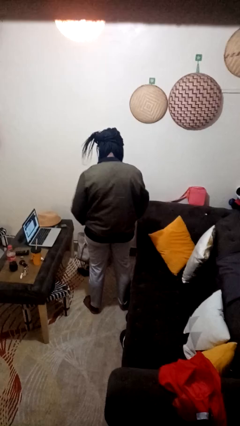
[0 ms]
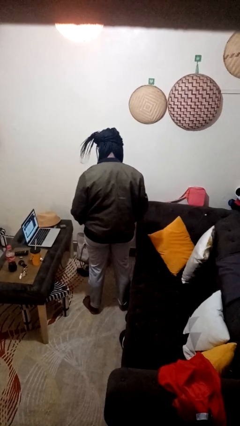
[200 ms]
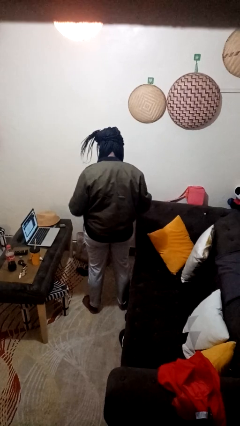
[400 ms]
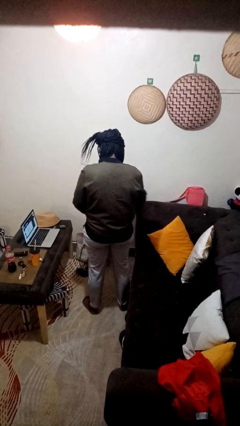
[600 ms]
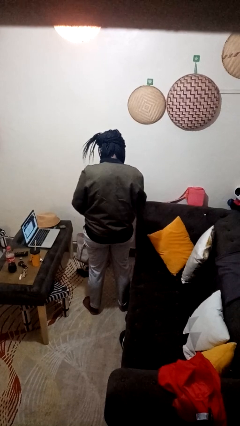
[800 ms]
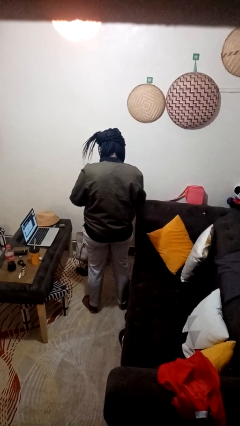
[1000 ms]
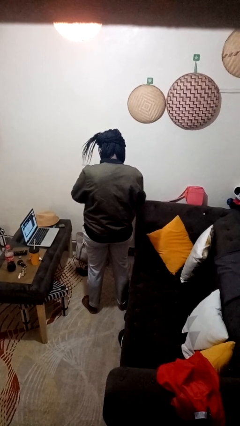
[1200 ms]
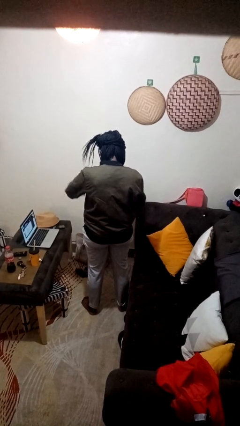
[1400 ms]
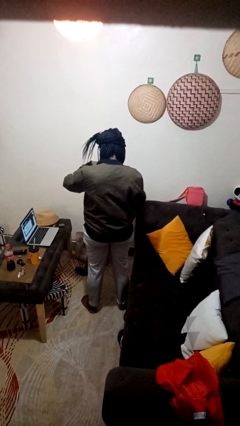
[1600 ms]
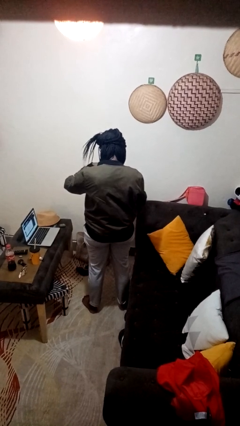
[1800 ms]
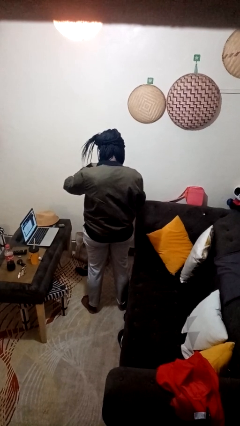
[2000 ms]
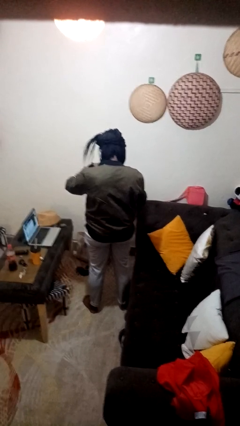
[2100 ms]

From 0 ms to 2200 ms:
person zips up jacket

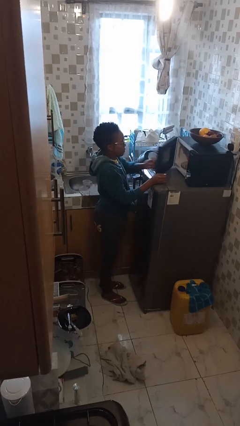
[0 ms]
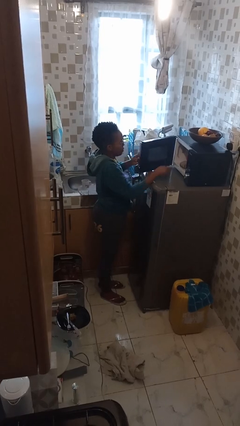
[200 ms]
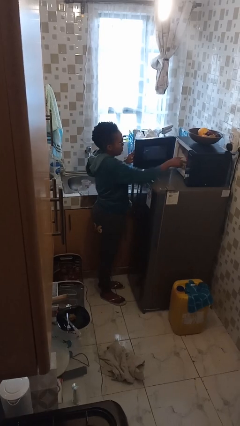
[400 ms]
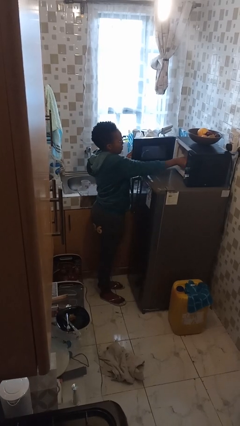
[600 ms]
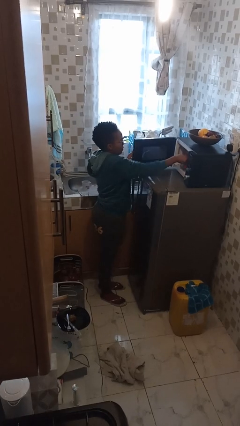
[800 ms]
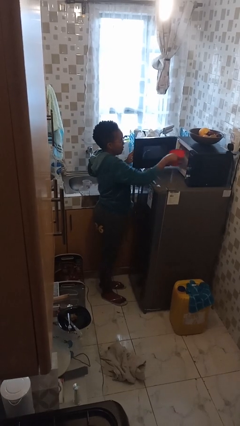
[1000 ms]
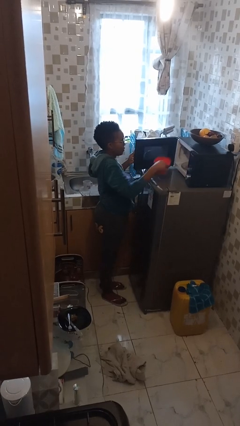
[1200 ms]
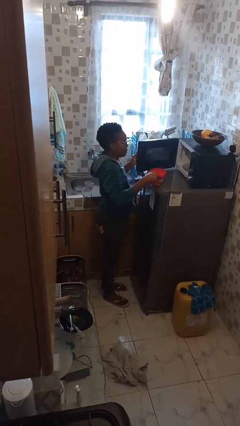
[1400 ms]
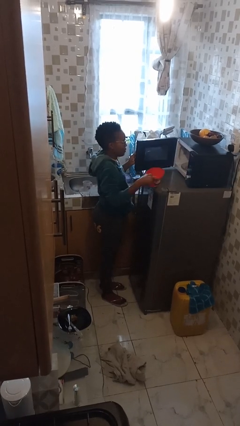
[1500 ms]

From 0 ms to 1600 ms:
person takes object from microwave

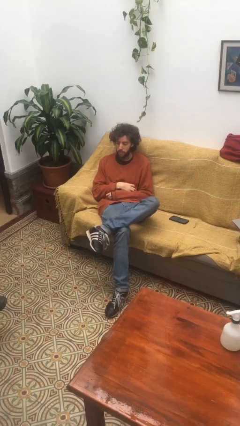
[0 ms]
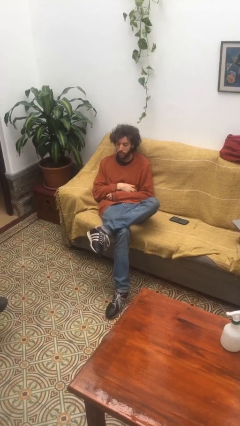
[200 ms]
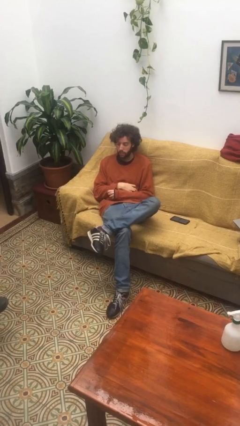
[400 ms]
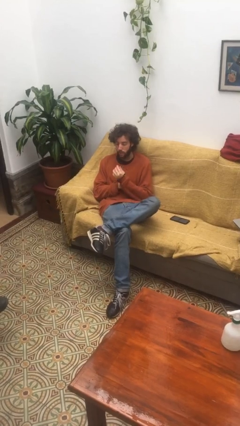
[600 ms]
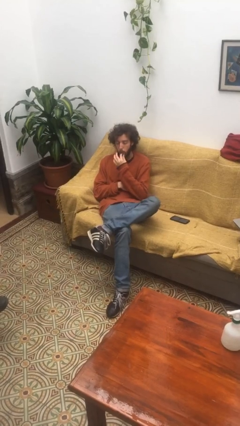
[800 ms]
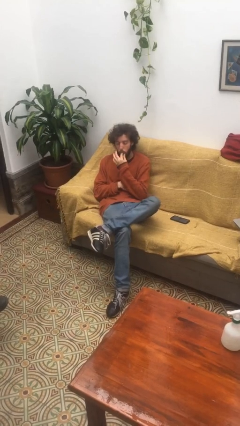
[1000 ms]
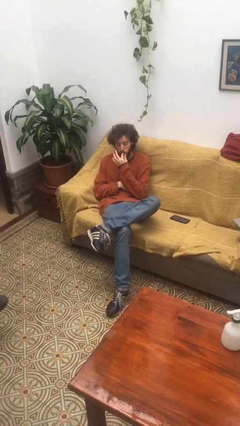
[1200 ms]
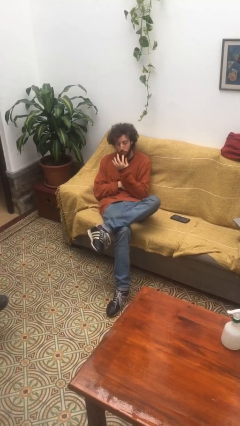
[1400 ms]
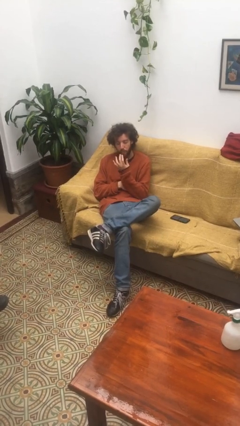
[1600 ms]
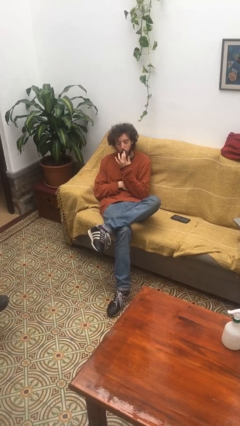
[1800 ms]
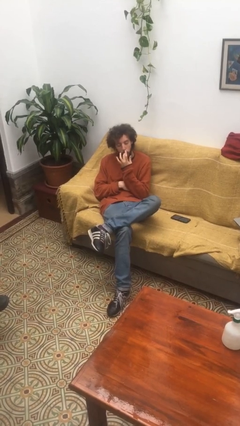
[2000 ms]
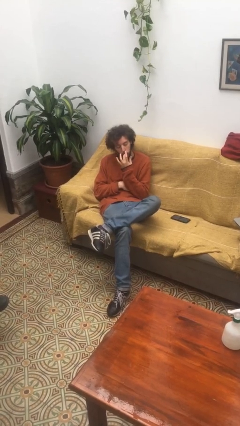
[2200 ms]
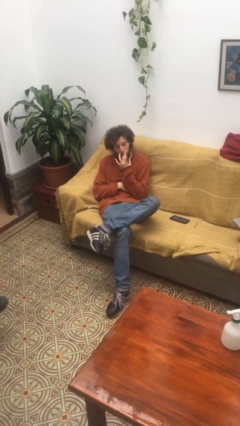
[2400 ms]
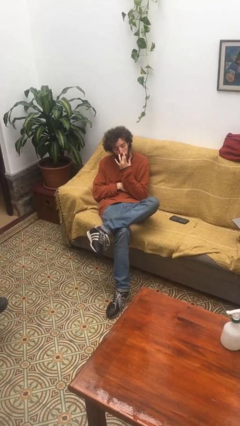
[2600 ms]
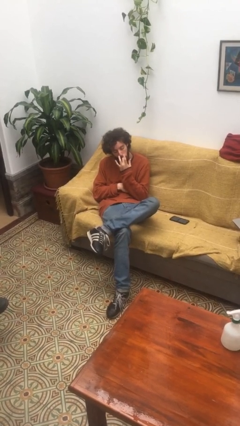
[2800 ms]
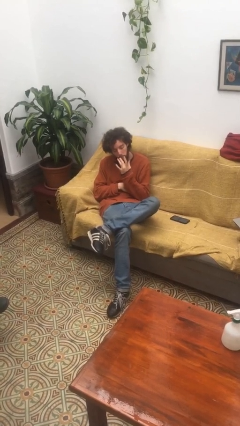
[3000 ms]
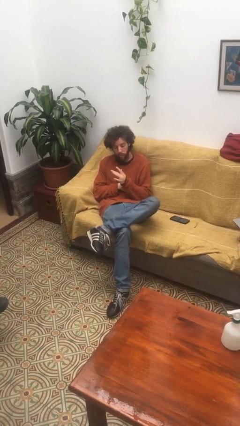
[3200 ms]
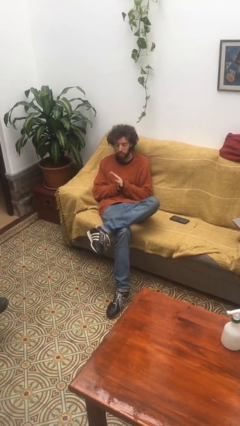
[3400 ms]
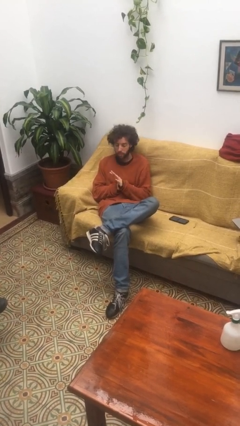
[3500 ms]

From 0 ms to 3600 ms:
person licks fingers

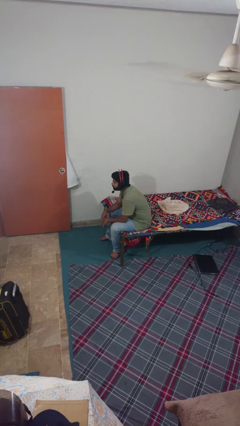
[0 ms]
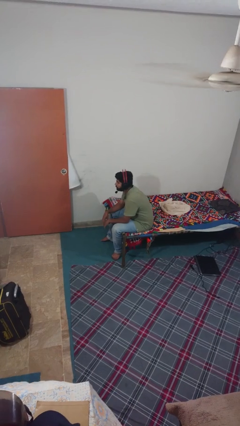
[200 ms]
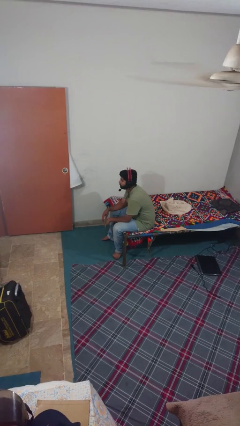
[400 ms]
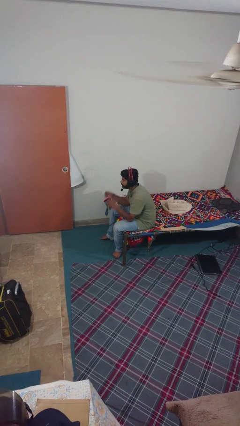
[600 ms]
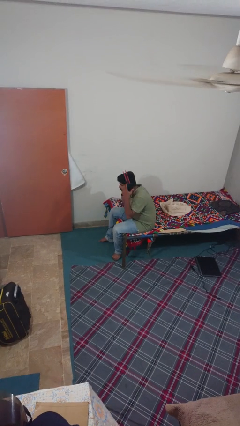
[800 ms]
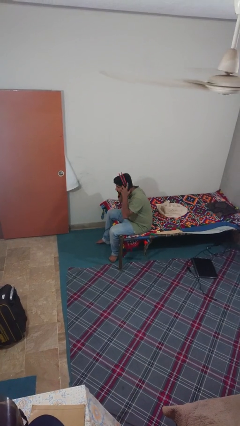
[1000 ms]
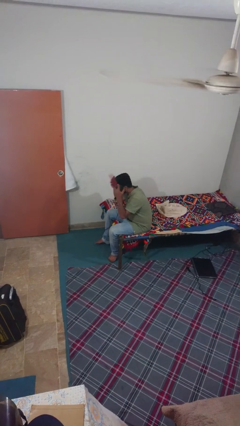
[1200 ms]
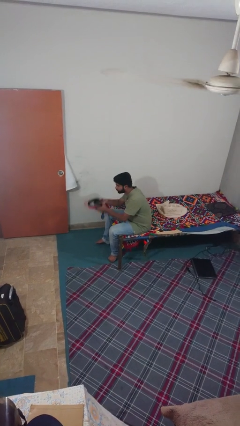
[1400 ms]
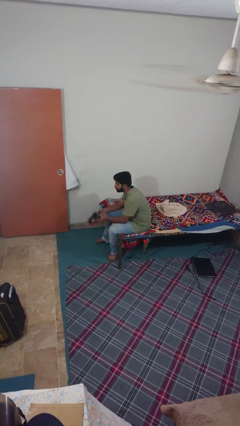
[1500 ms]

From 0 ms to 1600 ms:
person takes off headphones

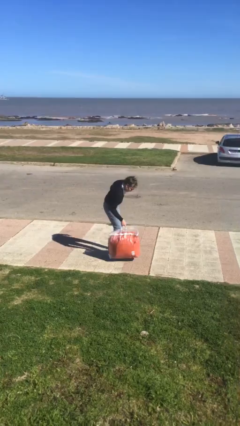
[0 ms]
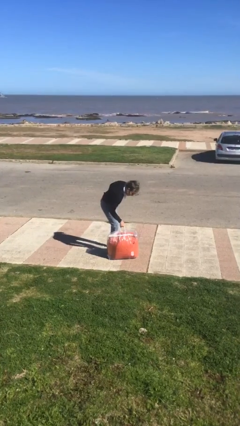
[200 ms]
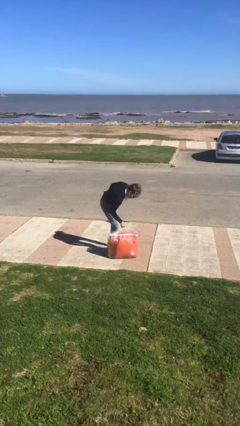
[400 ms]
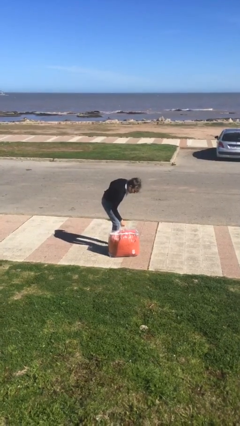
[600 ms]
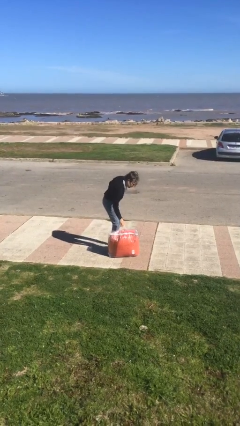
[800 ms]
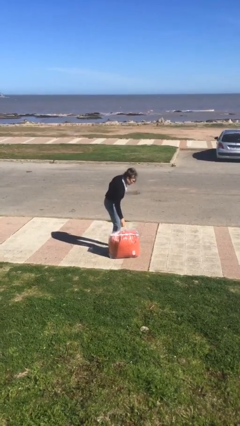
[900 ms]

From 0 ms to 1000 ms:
person puts down object on floor

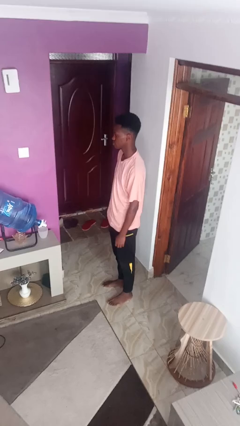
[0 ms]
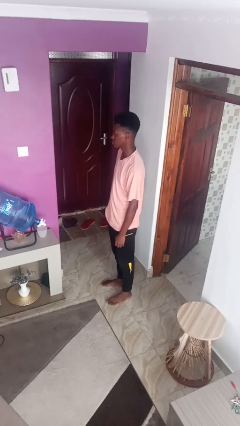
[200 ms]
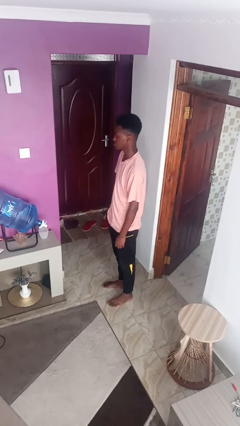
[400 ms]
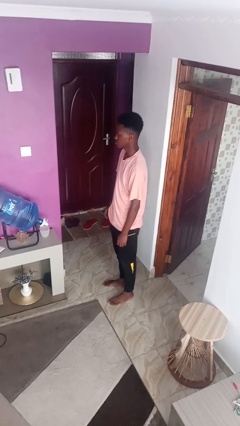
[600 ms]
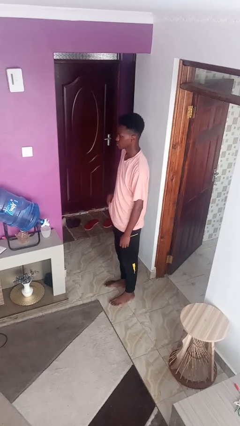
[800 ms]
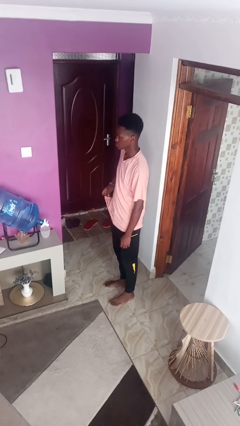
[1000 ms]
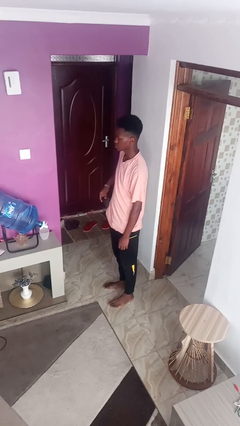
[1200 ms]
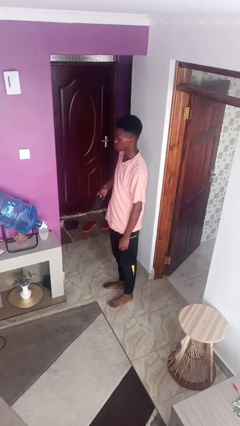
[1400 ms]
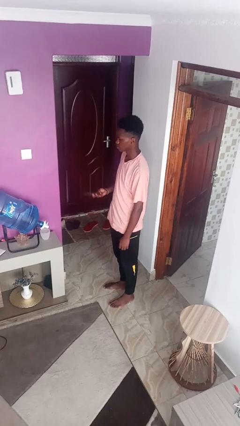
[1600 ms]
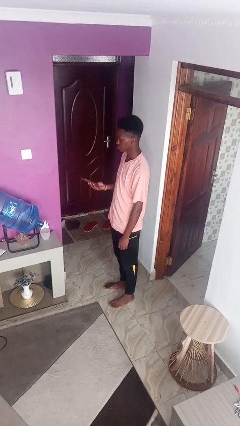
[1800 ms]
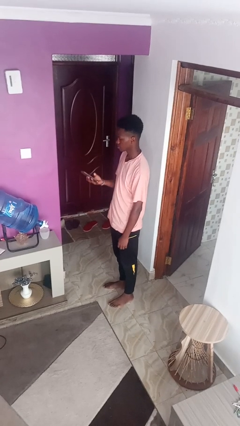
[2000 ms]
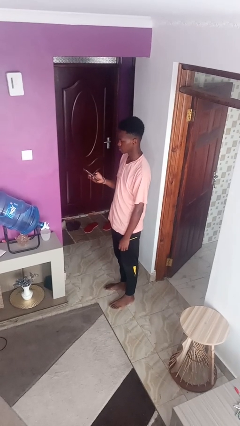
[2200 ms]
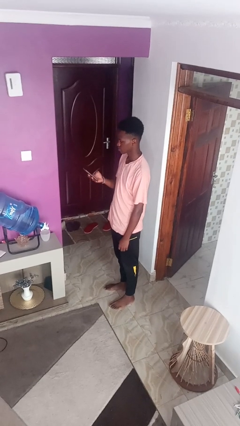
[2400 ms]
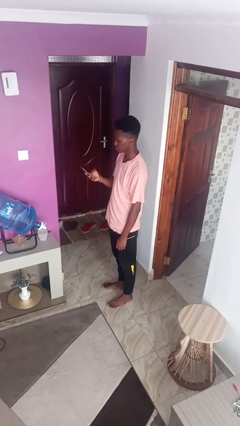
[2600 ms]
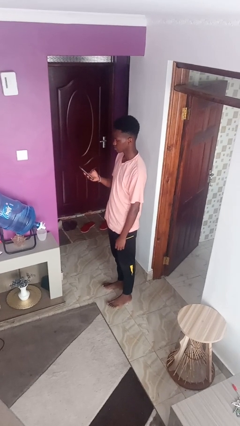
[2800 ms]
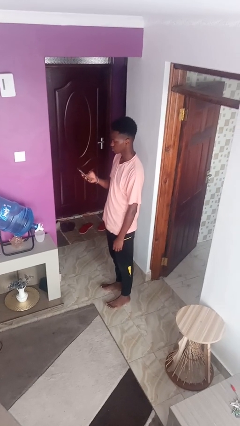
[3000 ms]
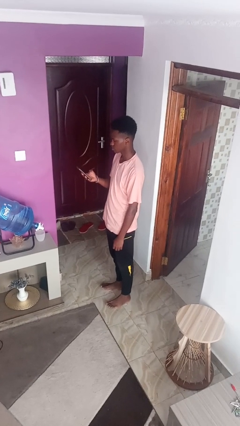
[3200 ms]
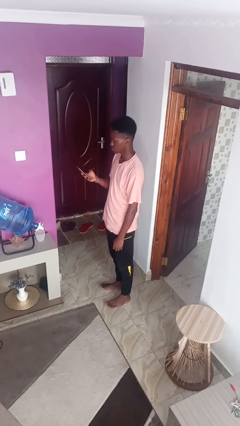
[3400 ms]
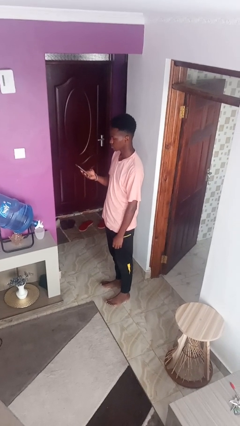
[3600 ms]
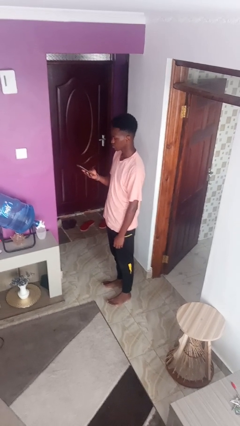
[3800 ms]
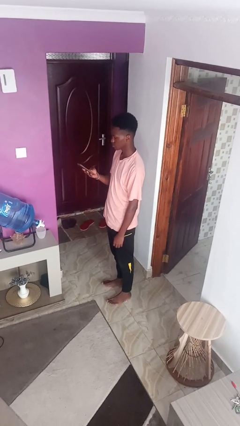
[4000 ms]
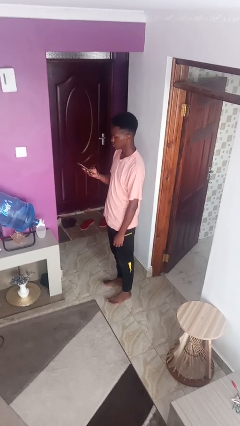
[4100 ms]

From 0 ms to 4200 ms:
person takes phone from pocket

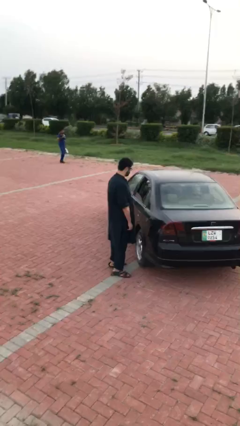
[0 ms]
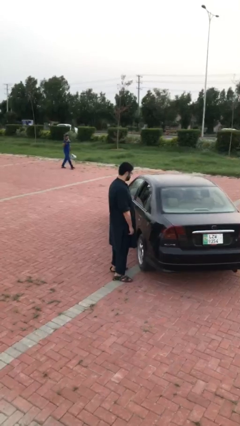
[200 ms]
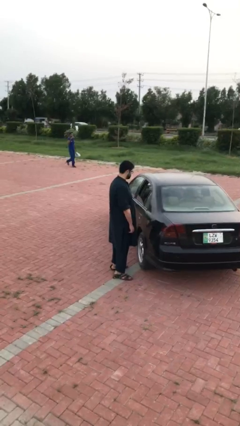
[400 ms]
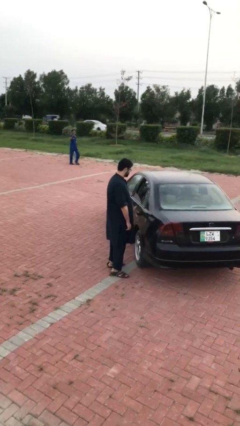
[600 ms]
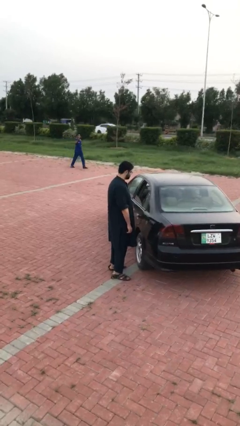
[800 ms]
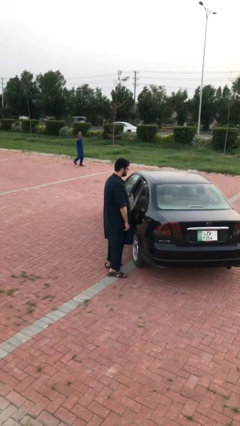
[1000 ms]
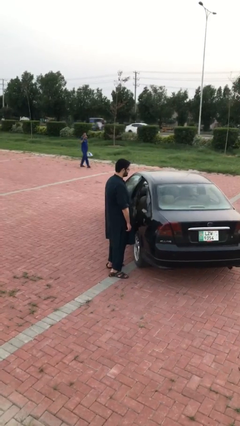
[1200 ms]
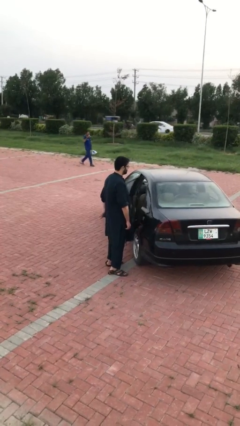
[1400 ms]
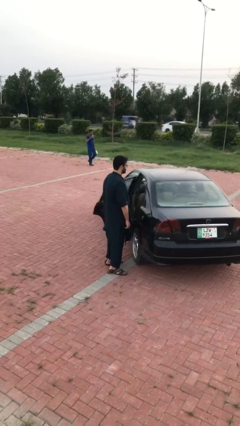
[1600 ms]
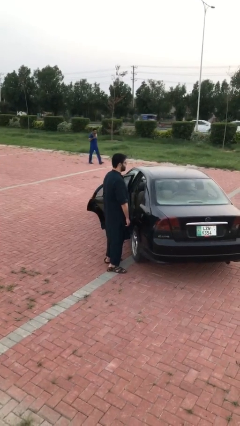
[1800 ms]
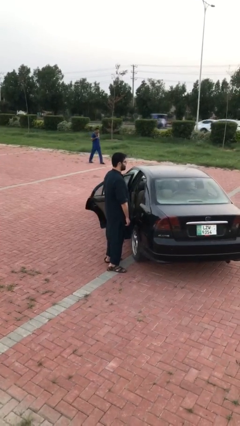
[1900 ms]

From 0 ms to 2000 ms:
person opens car door

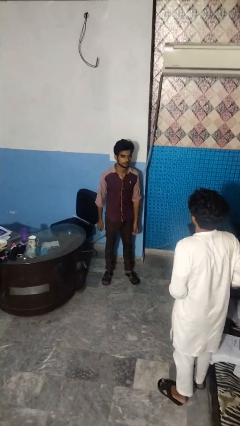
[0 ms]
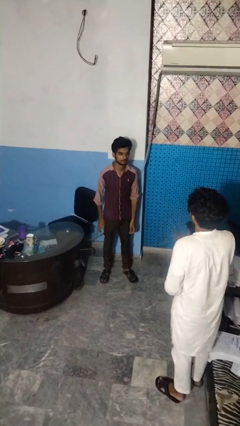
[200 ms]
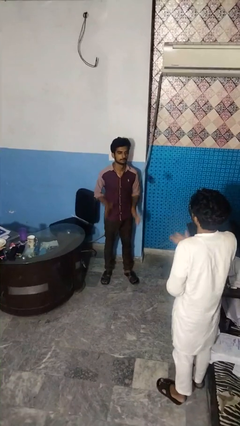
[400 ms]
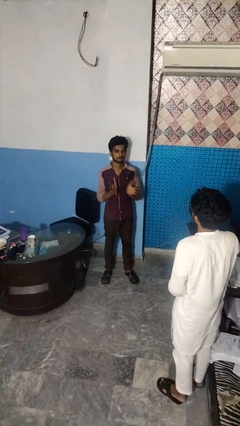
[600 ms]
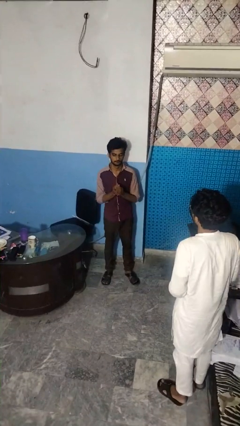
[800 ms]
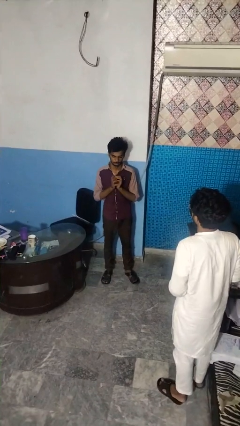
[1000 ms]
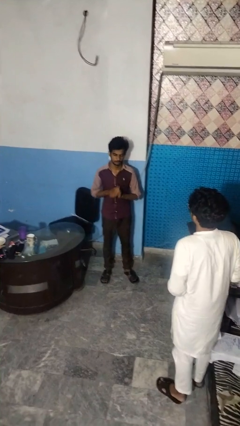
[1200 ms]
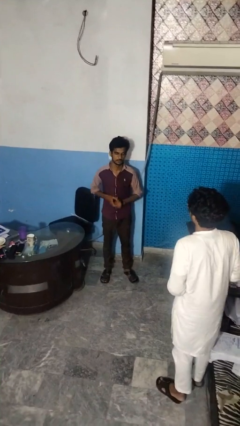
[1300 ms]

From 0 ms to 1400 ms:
person catches object from person
